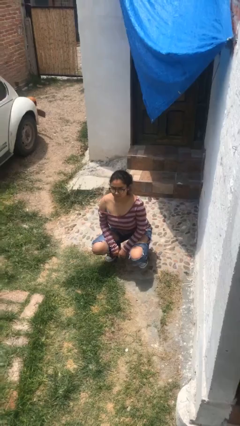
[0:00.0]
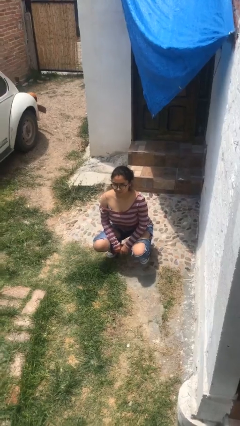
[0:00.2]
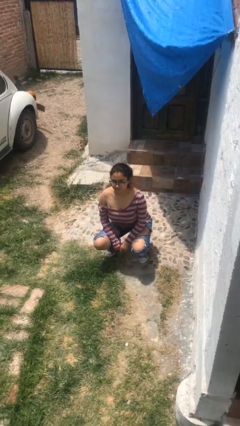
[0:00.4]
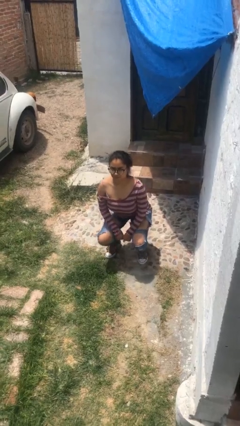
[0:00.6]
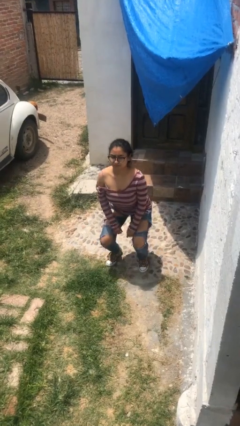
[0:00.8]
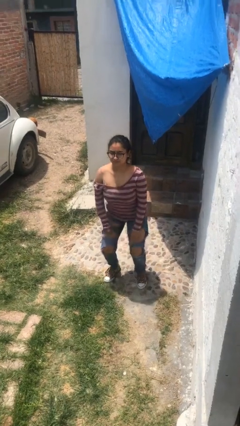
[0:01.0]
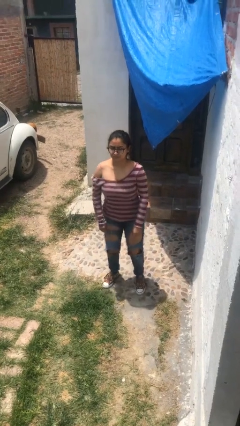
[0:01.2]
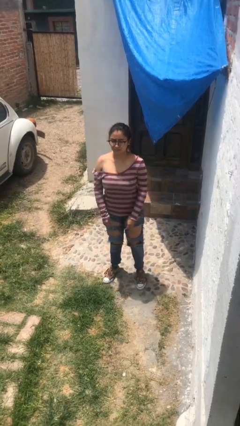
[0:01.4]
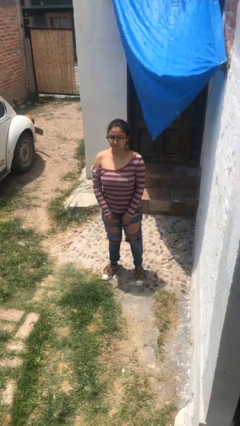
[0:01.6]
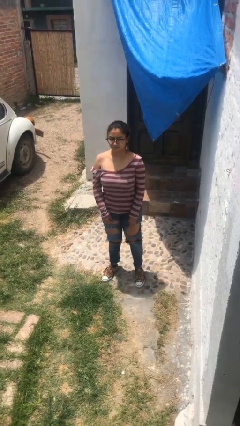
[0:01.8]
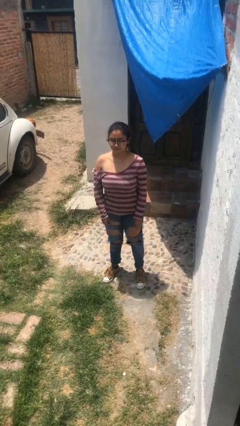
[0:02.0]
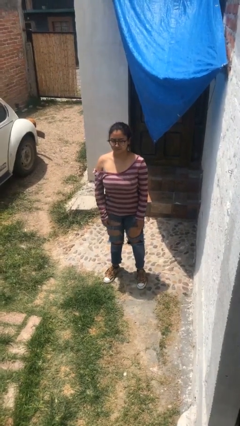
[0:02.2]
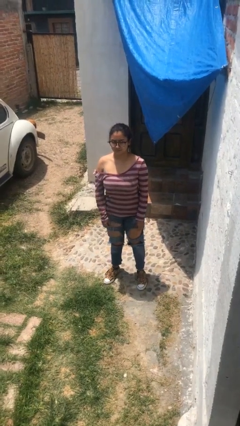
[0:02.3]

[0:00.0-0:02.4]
person stands up

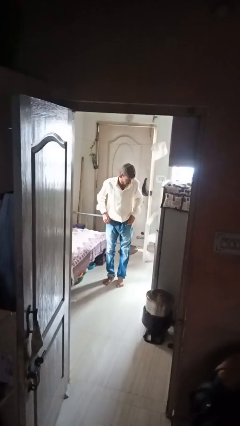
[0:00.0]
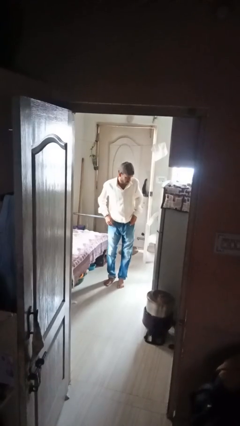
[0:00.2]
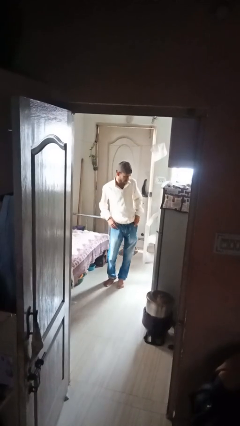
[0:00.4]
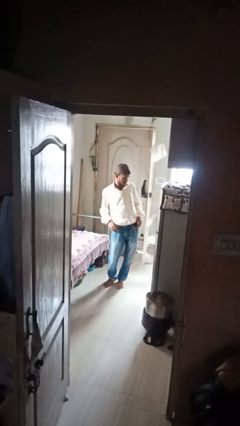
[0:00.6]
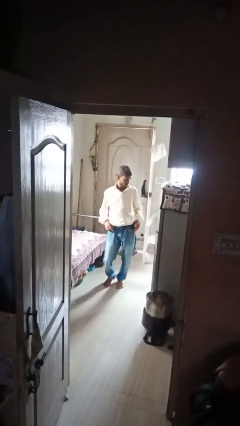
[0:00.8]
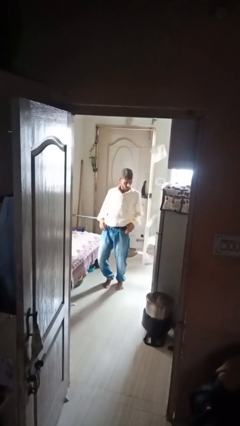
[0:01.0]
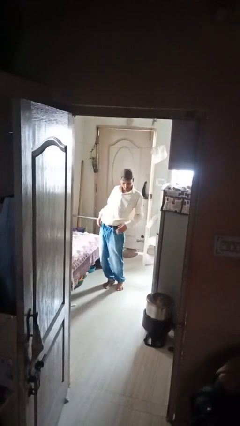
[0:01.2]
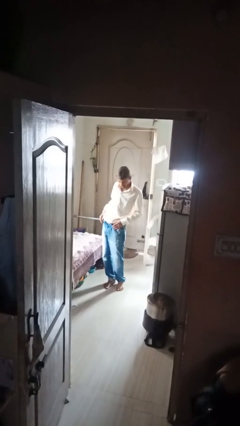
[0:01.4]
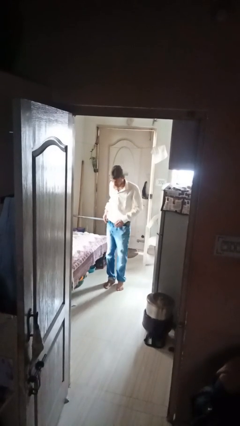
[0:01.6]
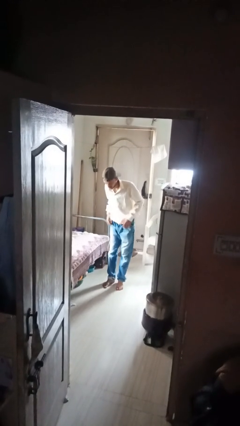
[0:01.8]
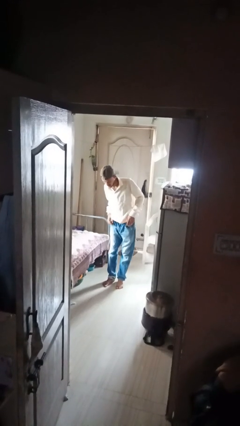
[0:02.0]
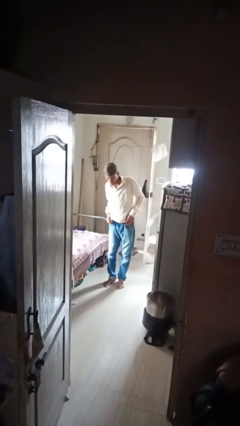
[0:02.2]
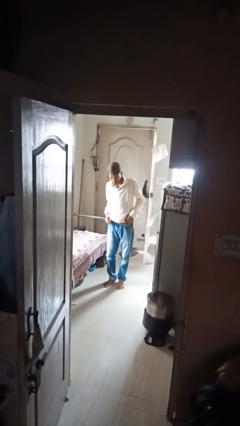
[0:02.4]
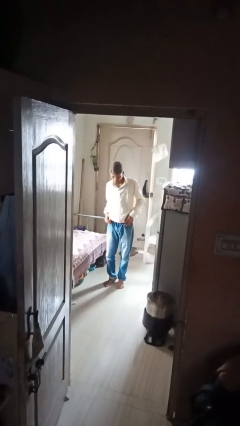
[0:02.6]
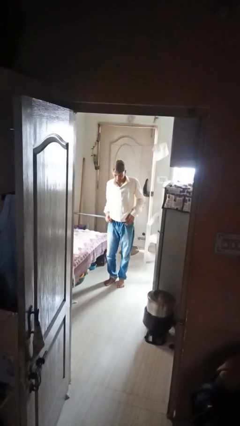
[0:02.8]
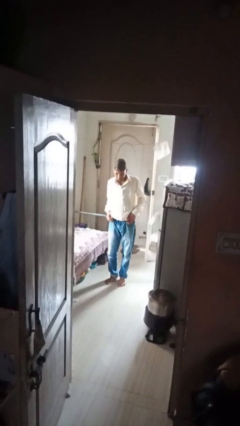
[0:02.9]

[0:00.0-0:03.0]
person wiggles hips

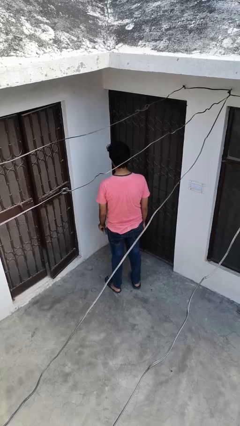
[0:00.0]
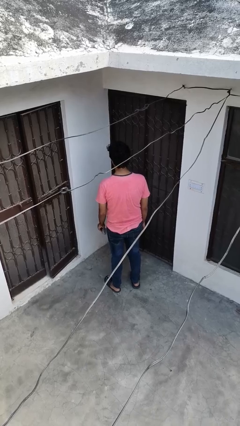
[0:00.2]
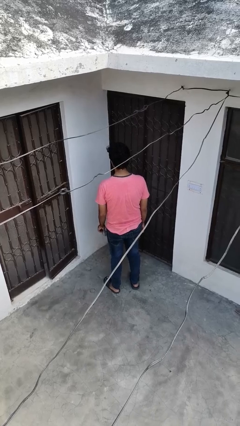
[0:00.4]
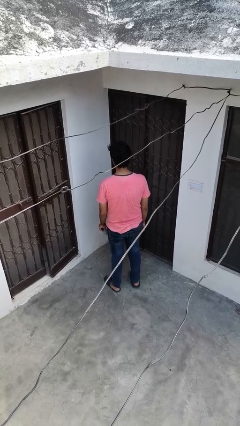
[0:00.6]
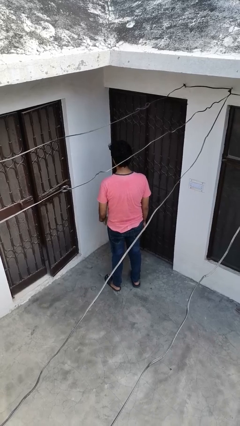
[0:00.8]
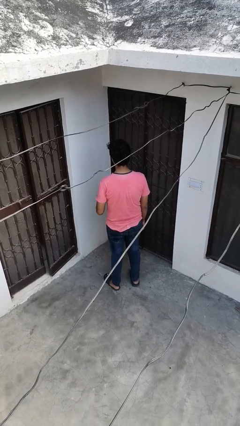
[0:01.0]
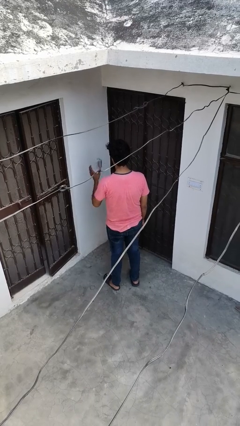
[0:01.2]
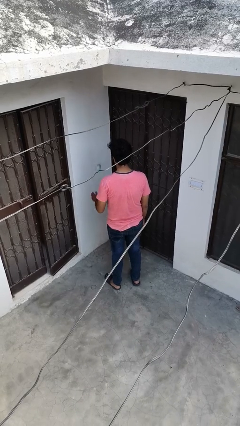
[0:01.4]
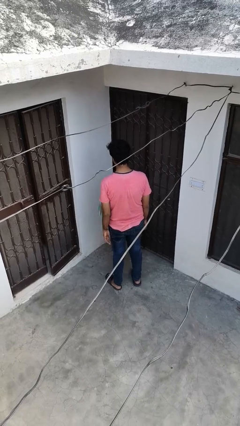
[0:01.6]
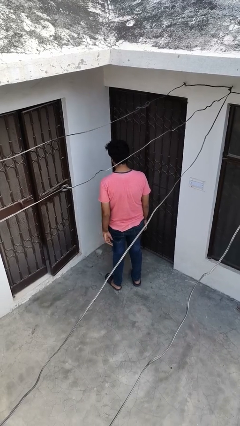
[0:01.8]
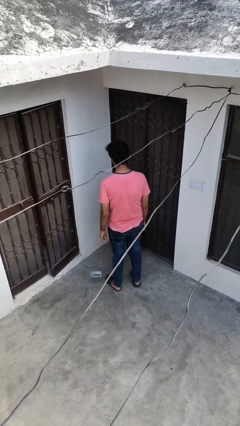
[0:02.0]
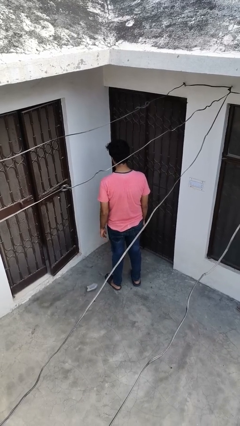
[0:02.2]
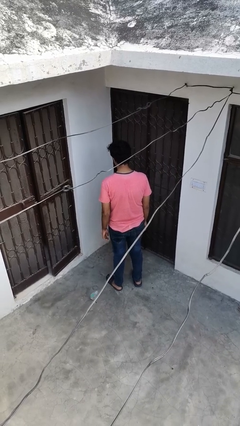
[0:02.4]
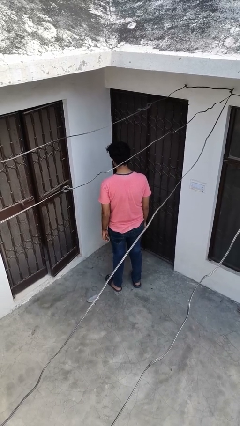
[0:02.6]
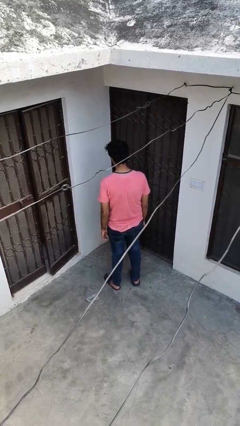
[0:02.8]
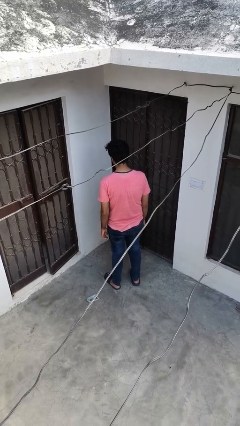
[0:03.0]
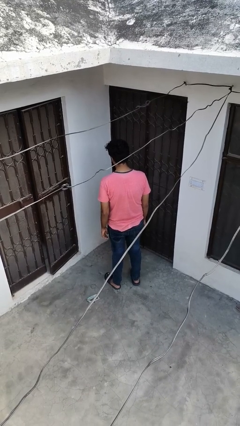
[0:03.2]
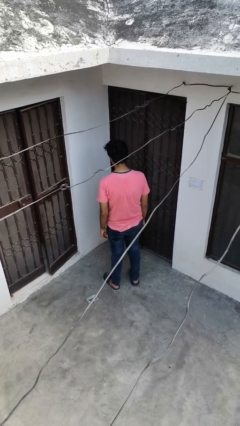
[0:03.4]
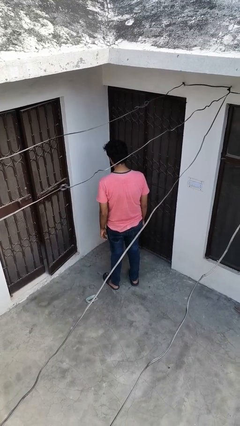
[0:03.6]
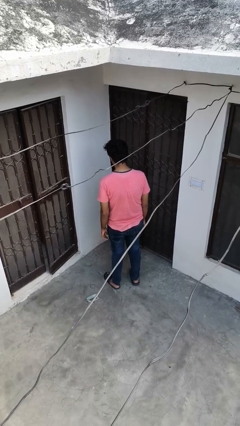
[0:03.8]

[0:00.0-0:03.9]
person throws object into air

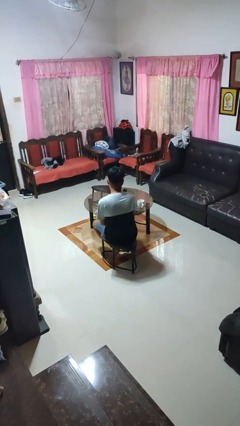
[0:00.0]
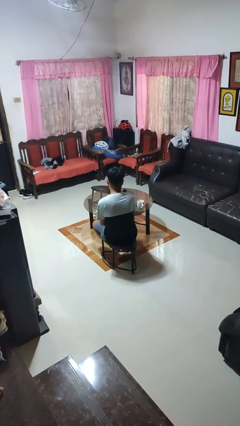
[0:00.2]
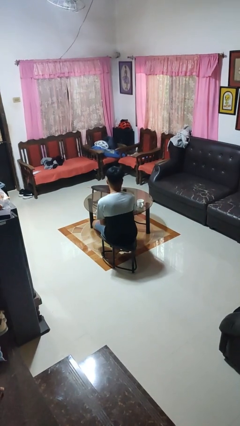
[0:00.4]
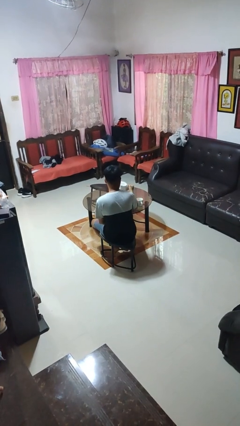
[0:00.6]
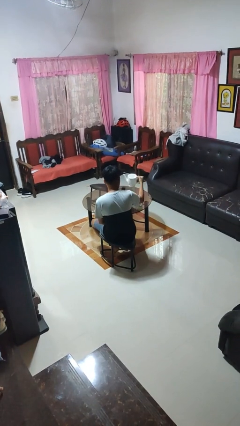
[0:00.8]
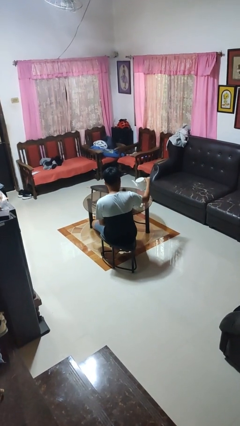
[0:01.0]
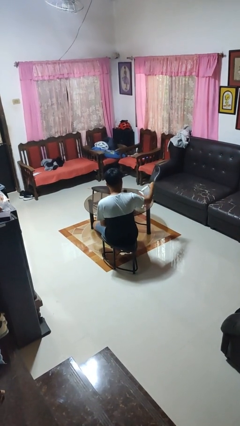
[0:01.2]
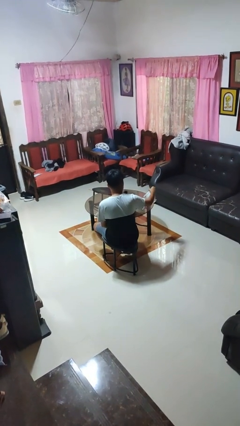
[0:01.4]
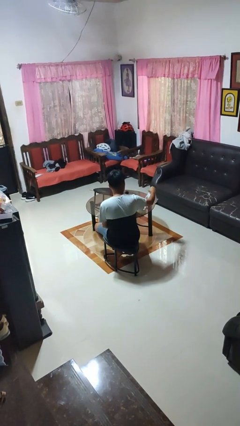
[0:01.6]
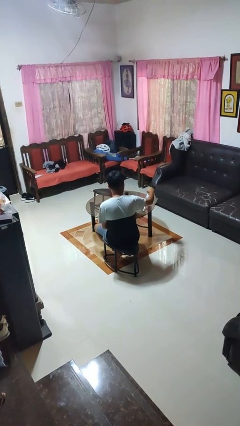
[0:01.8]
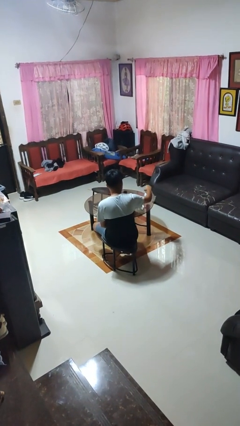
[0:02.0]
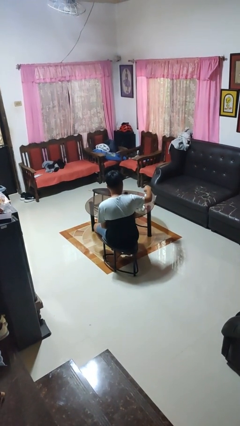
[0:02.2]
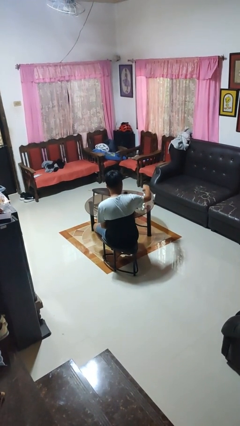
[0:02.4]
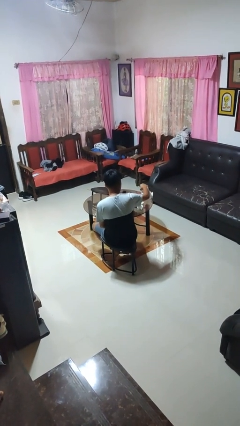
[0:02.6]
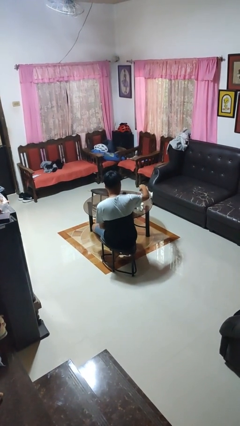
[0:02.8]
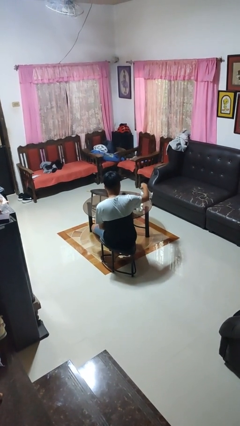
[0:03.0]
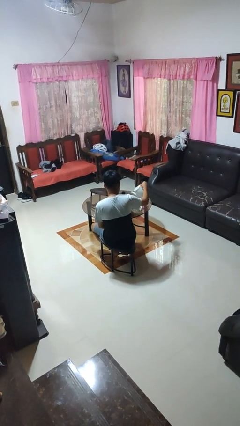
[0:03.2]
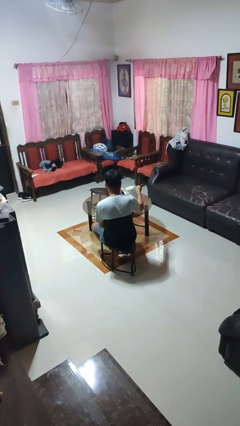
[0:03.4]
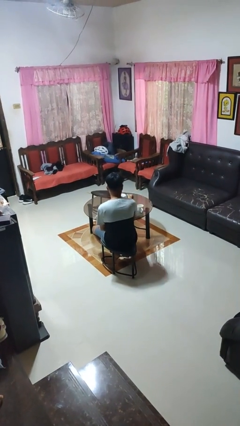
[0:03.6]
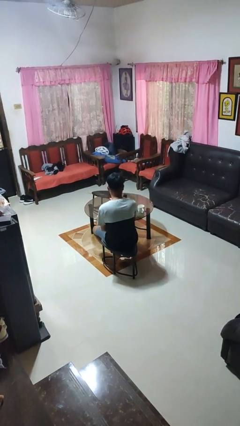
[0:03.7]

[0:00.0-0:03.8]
person pours coffee into mug

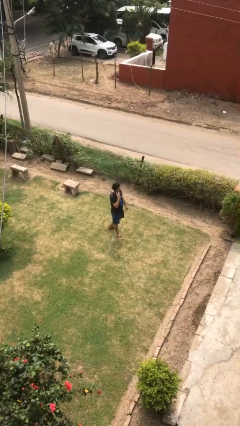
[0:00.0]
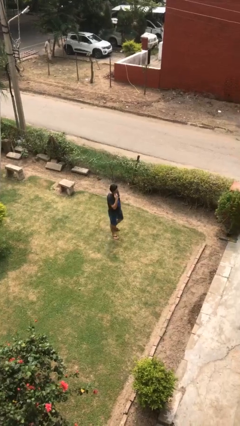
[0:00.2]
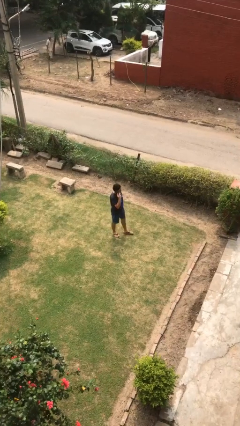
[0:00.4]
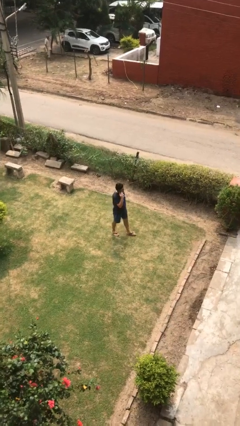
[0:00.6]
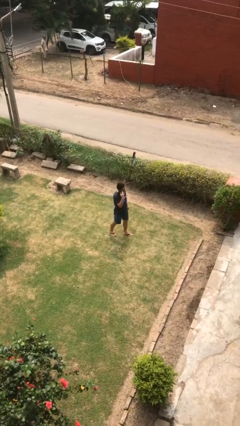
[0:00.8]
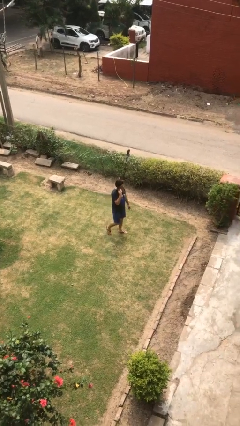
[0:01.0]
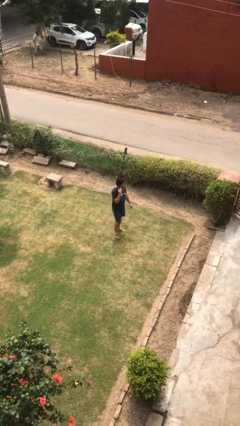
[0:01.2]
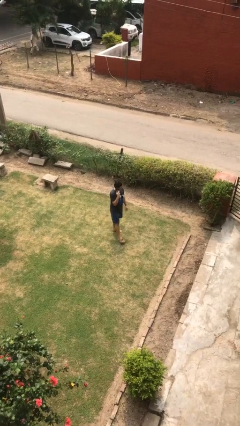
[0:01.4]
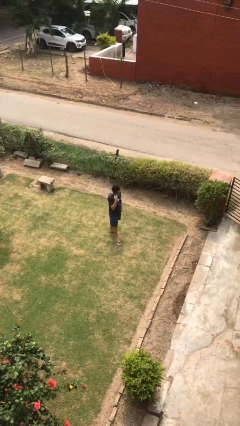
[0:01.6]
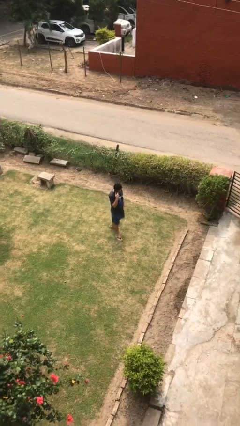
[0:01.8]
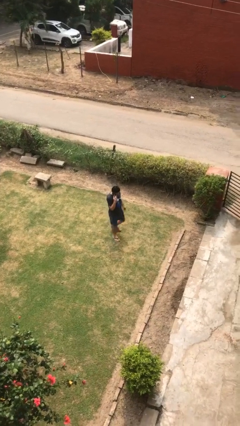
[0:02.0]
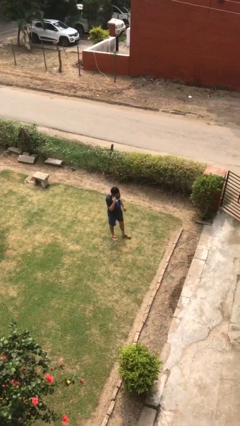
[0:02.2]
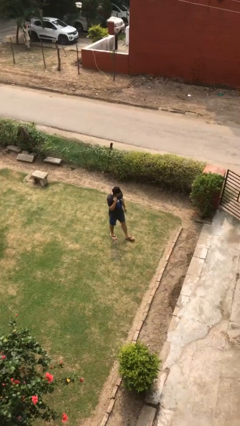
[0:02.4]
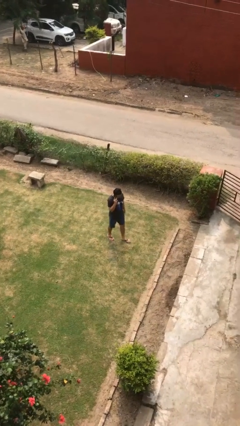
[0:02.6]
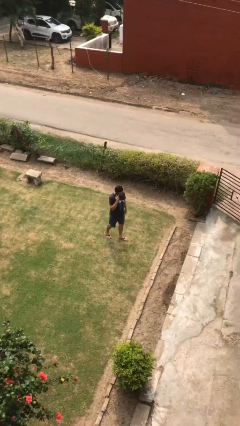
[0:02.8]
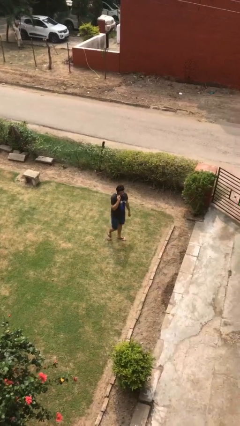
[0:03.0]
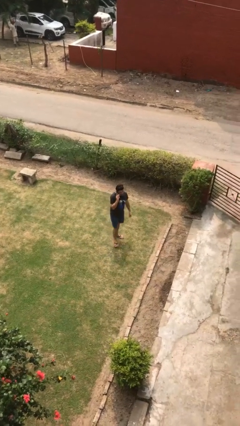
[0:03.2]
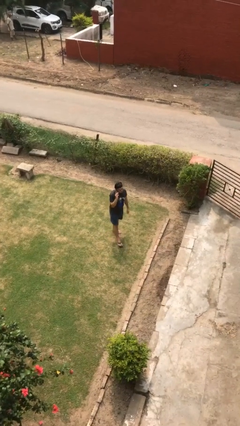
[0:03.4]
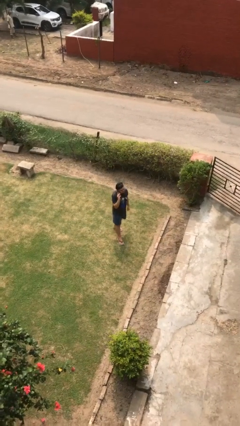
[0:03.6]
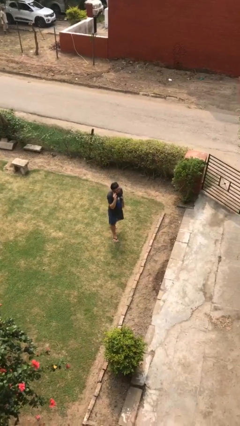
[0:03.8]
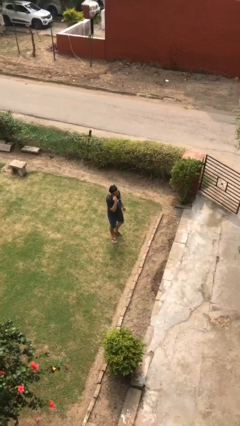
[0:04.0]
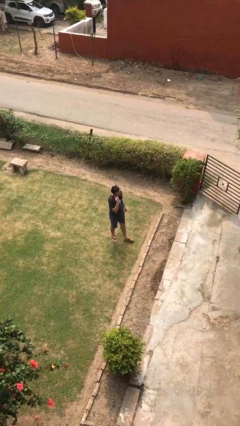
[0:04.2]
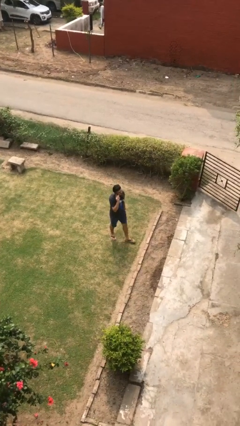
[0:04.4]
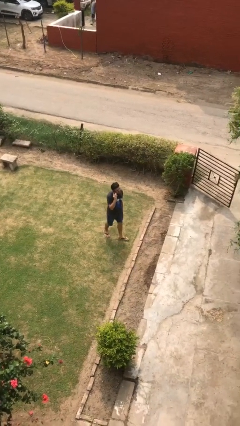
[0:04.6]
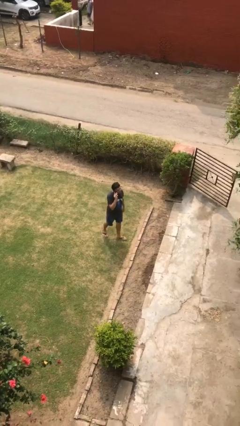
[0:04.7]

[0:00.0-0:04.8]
person talks on phone
